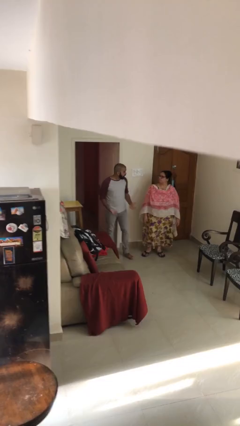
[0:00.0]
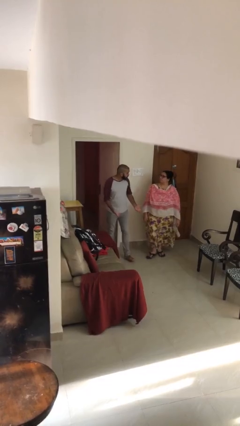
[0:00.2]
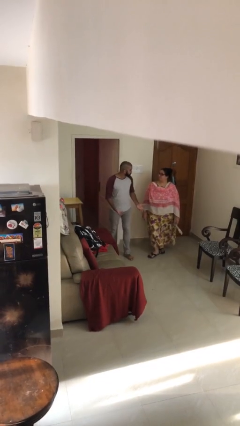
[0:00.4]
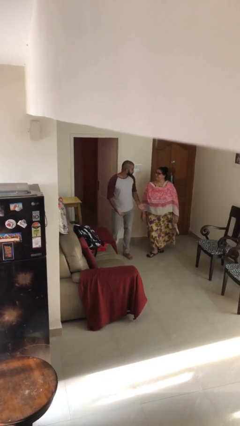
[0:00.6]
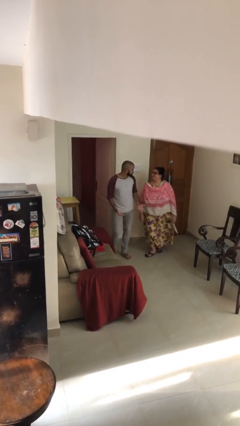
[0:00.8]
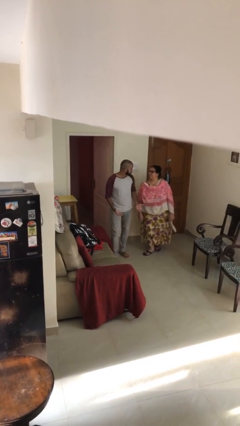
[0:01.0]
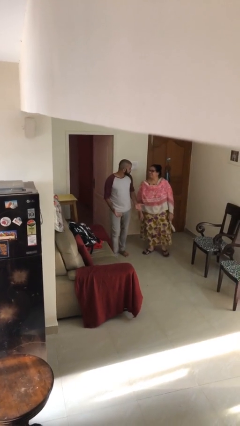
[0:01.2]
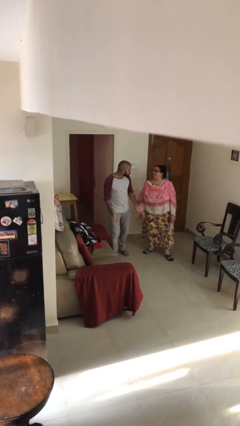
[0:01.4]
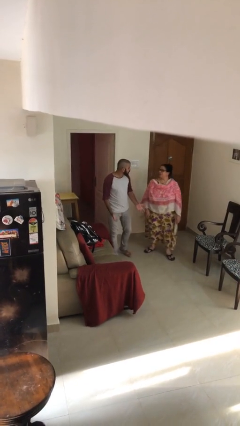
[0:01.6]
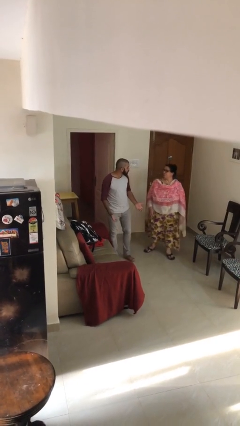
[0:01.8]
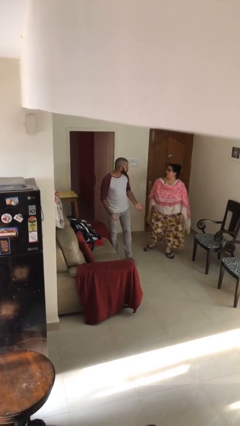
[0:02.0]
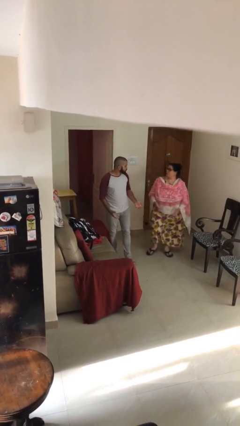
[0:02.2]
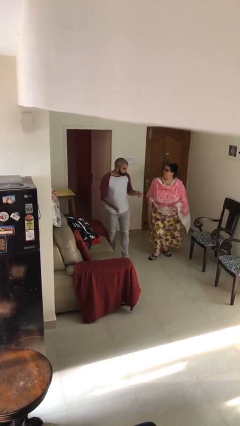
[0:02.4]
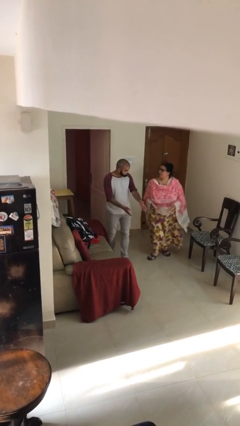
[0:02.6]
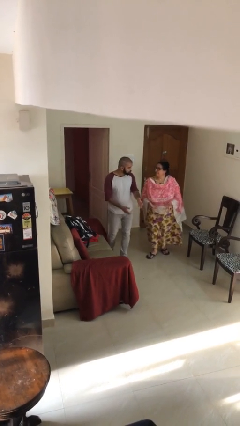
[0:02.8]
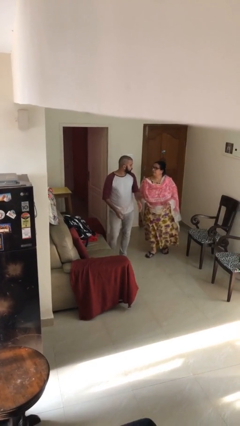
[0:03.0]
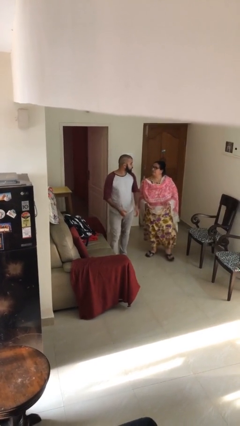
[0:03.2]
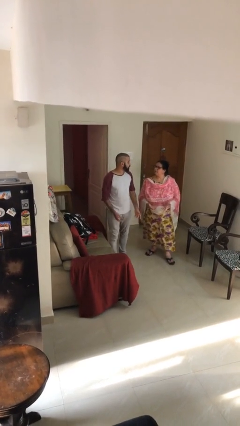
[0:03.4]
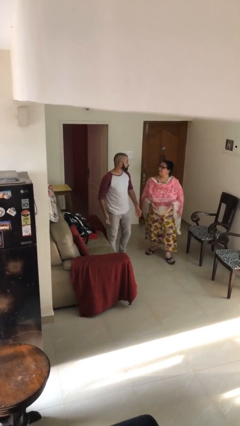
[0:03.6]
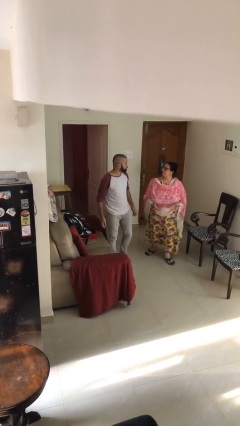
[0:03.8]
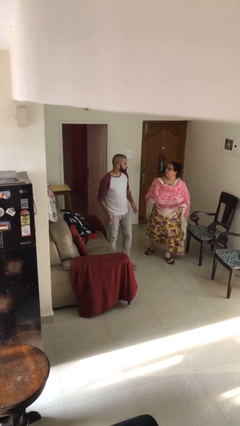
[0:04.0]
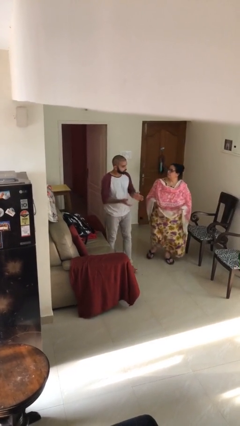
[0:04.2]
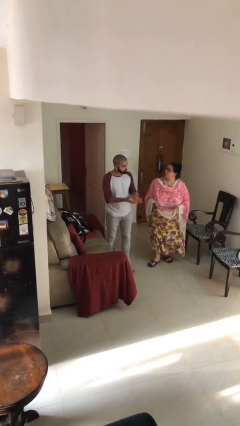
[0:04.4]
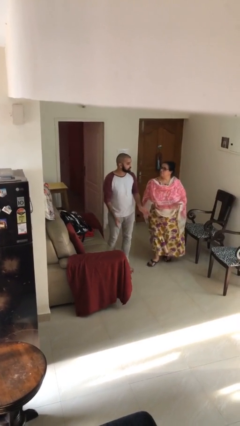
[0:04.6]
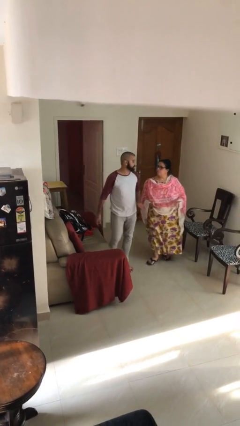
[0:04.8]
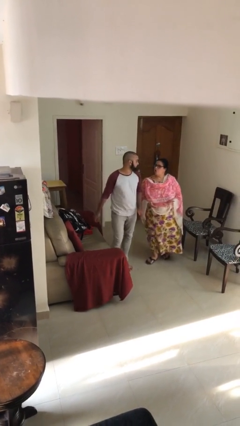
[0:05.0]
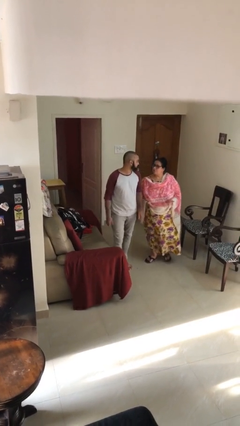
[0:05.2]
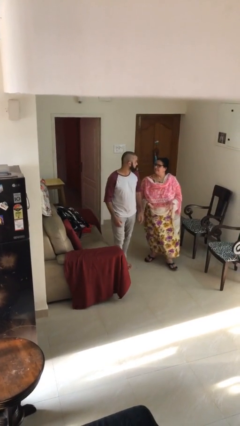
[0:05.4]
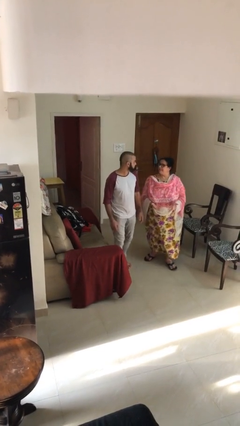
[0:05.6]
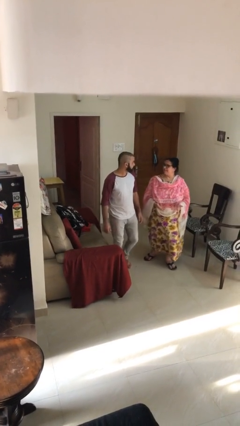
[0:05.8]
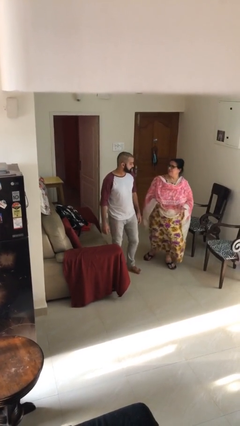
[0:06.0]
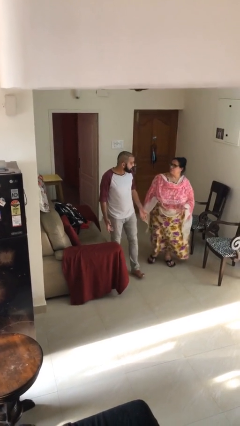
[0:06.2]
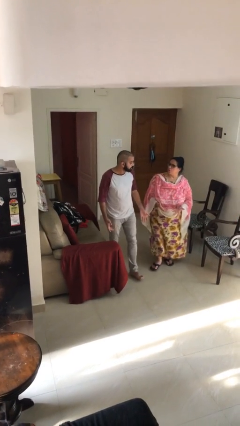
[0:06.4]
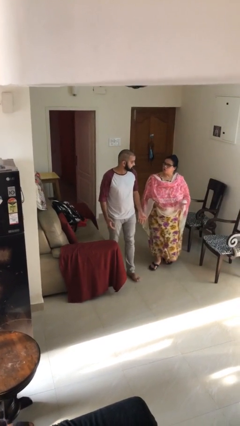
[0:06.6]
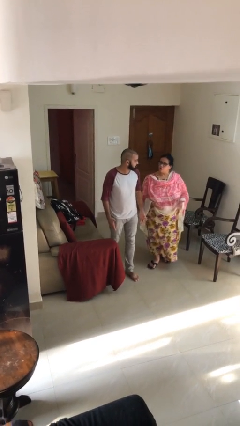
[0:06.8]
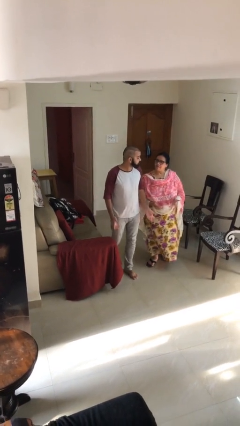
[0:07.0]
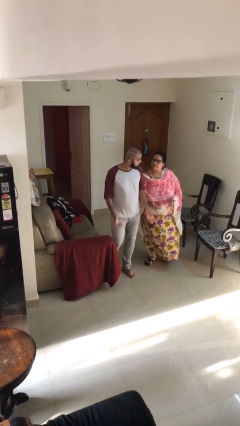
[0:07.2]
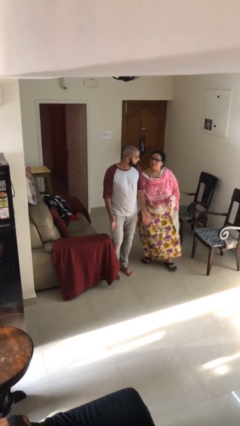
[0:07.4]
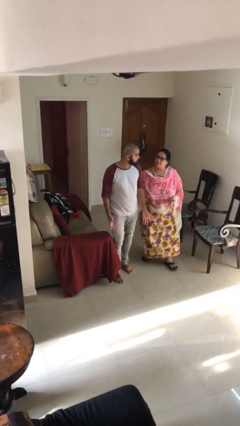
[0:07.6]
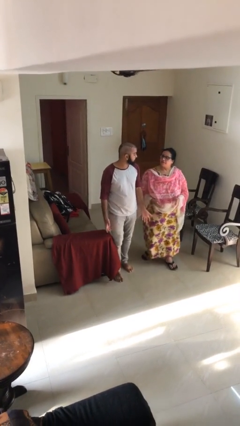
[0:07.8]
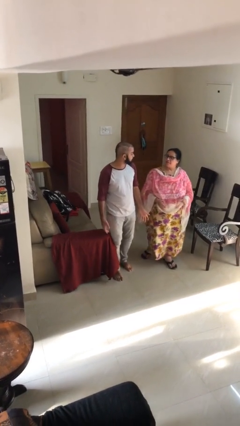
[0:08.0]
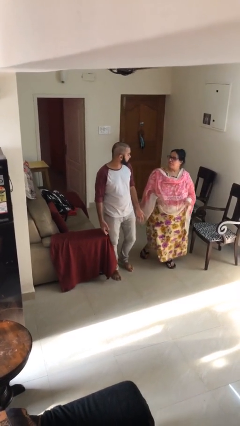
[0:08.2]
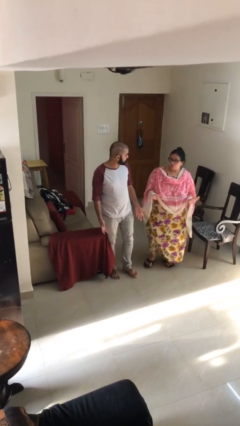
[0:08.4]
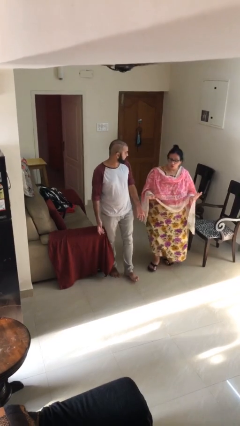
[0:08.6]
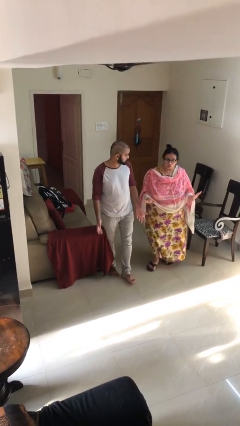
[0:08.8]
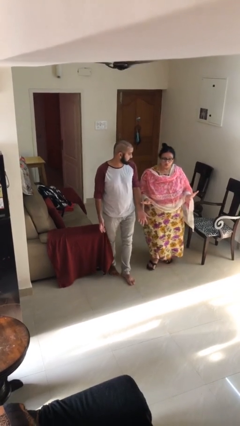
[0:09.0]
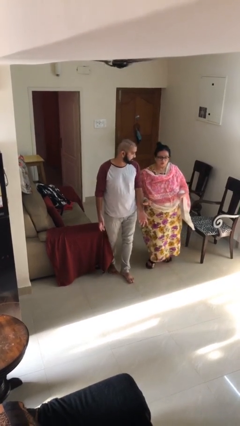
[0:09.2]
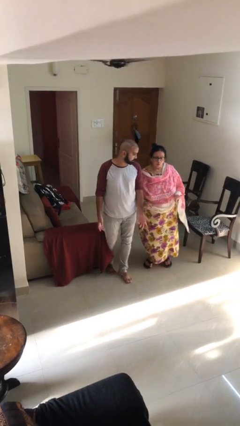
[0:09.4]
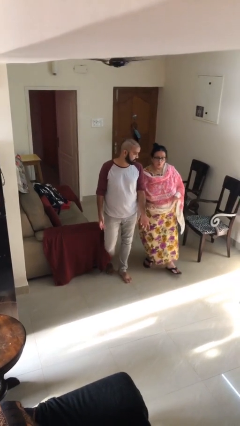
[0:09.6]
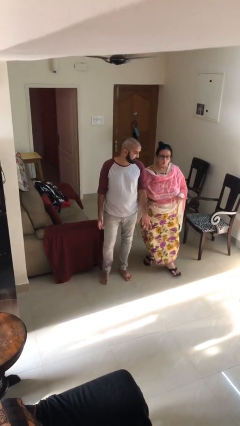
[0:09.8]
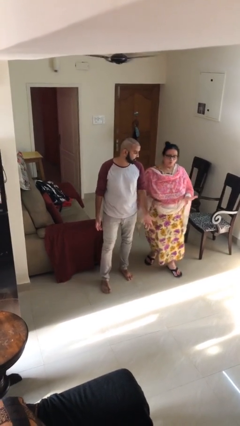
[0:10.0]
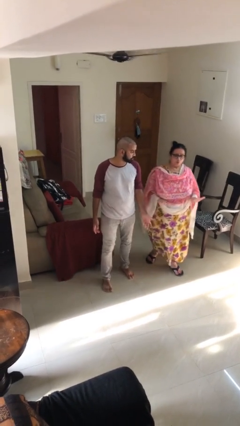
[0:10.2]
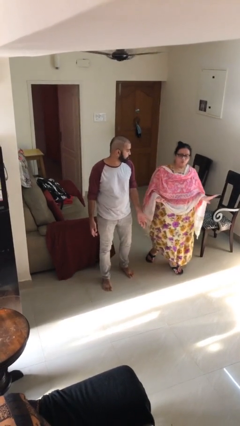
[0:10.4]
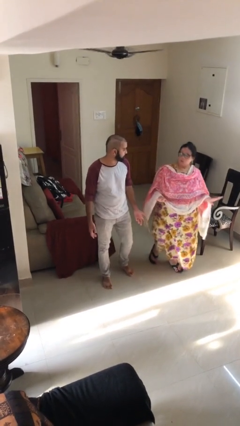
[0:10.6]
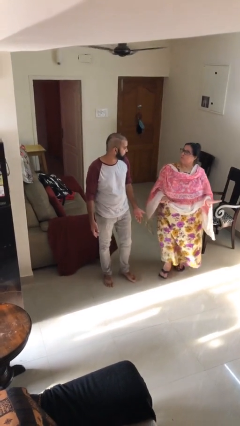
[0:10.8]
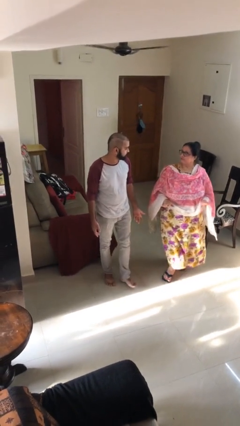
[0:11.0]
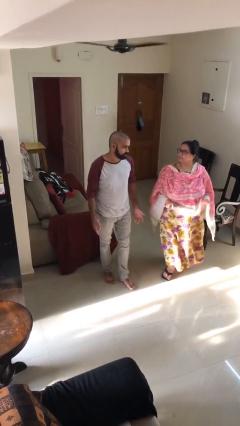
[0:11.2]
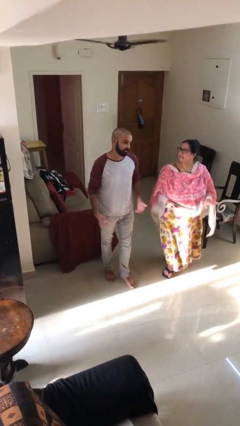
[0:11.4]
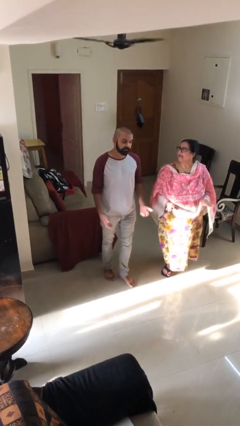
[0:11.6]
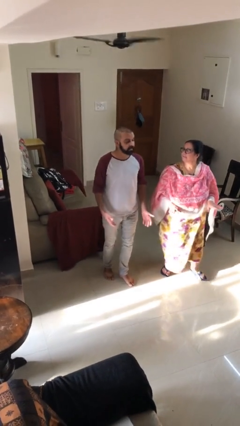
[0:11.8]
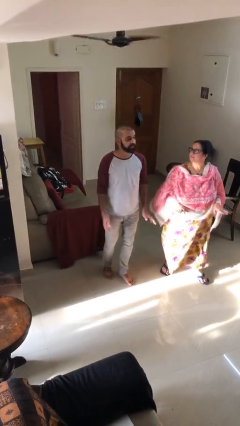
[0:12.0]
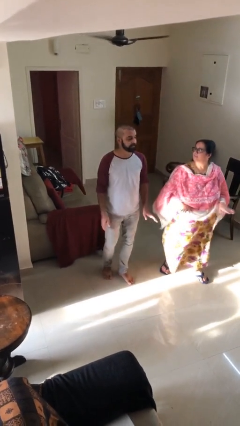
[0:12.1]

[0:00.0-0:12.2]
person talks to person

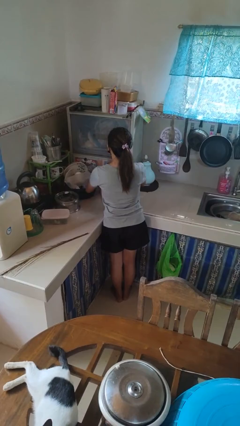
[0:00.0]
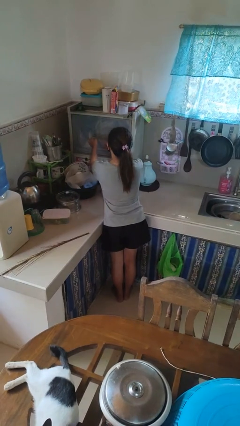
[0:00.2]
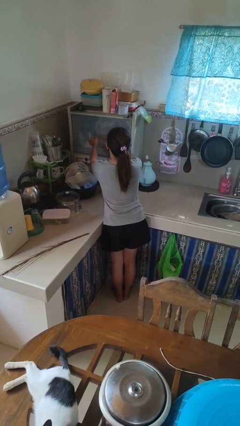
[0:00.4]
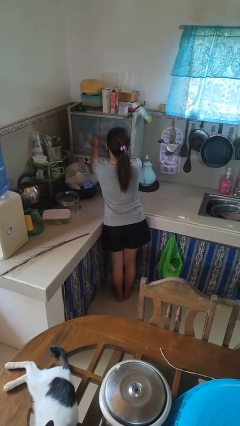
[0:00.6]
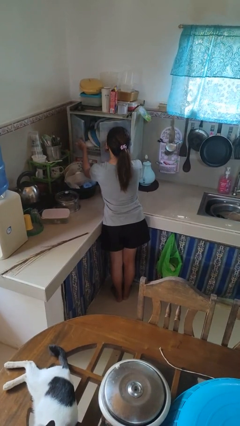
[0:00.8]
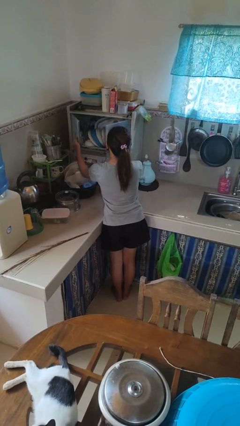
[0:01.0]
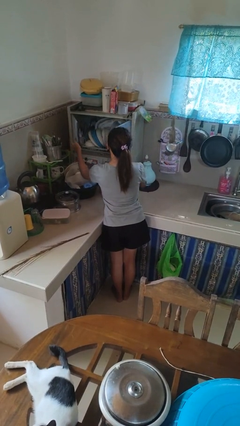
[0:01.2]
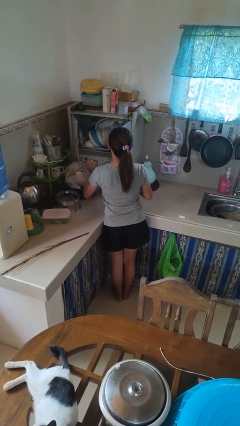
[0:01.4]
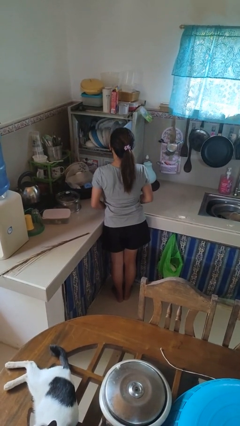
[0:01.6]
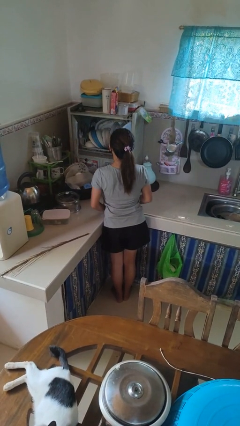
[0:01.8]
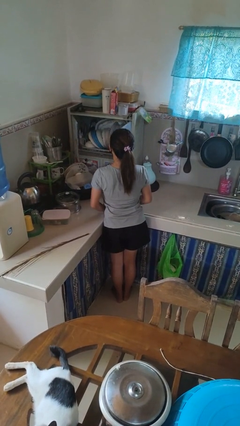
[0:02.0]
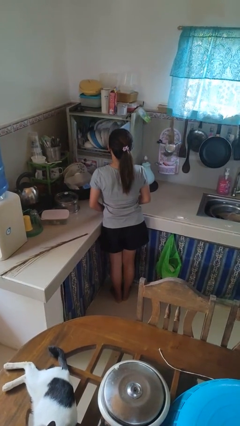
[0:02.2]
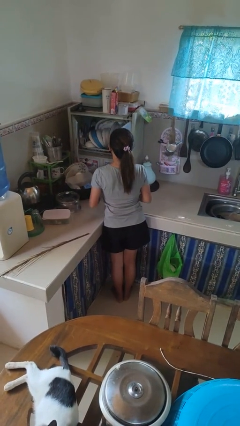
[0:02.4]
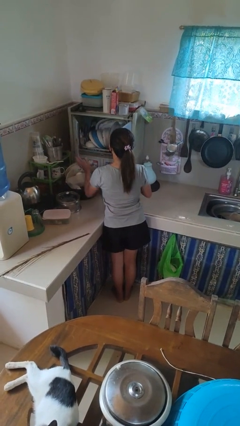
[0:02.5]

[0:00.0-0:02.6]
person opens kitchen drawer

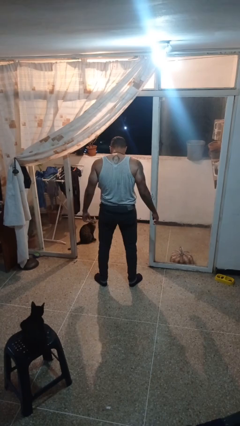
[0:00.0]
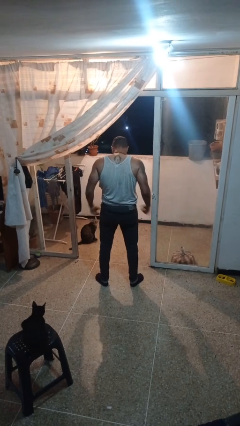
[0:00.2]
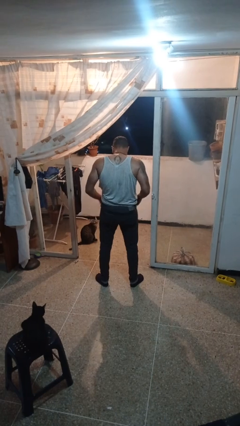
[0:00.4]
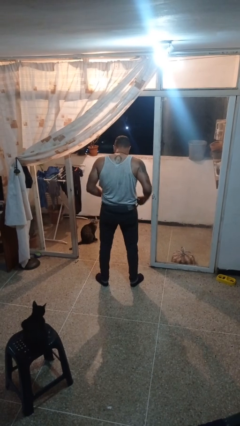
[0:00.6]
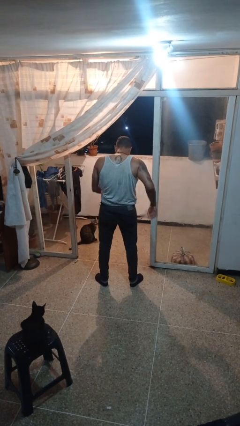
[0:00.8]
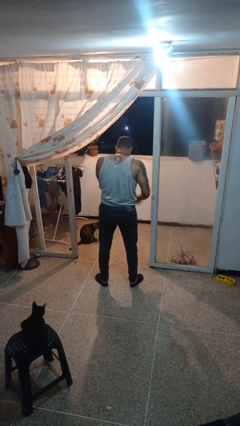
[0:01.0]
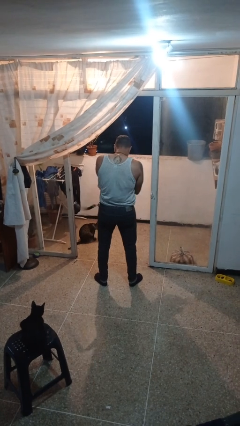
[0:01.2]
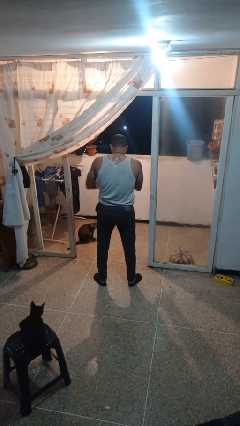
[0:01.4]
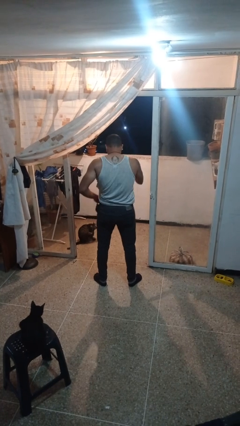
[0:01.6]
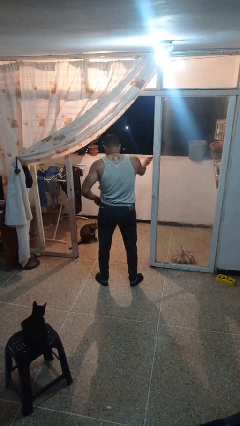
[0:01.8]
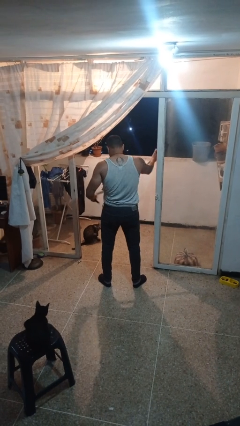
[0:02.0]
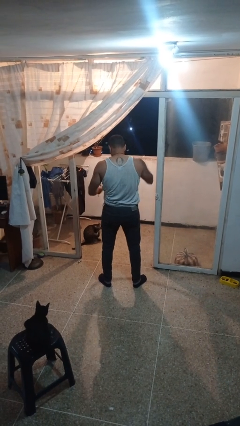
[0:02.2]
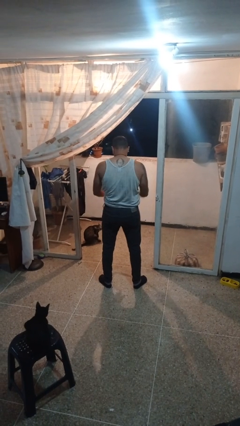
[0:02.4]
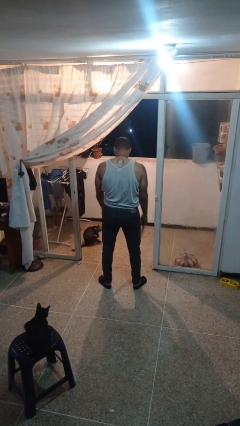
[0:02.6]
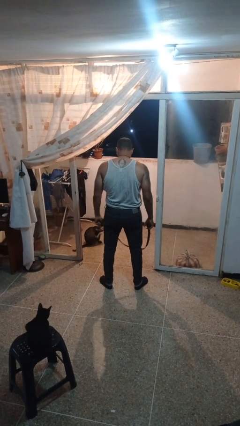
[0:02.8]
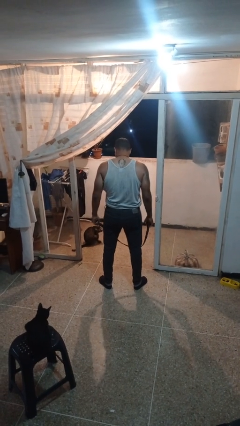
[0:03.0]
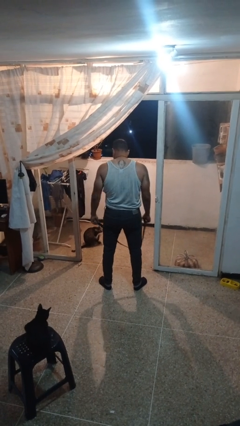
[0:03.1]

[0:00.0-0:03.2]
person takes off belt
